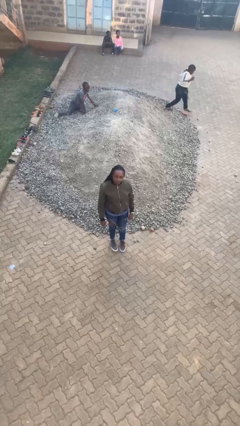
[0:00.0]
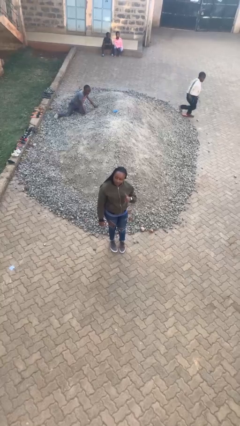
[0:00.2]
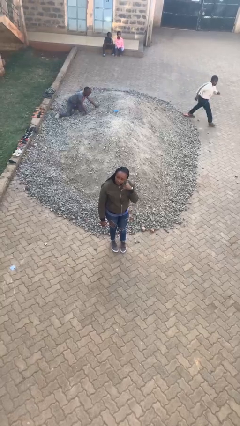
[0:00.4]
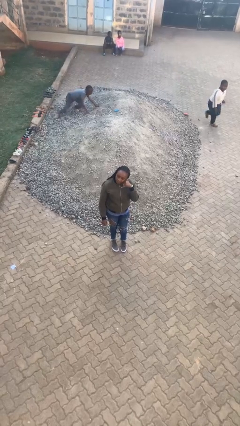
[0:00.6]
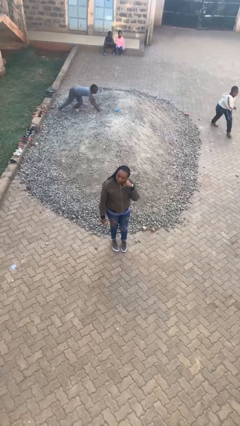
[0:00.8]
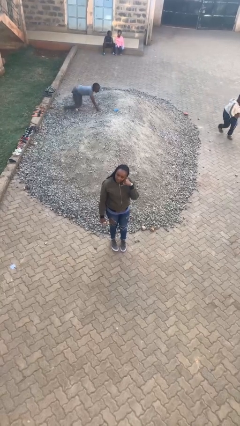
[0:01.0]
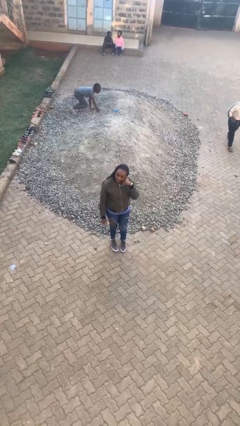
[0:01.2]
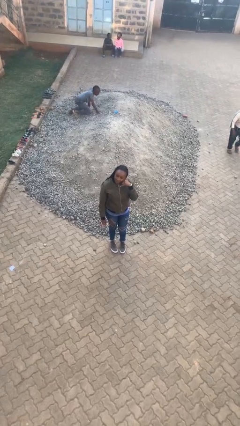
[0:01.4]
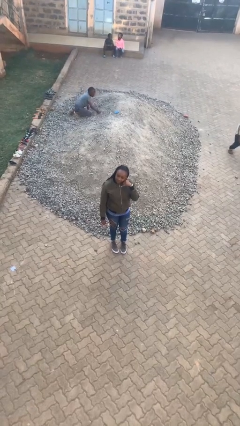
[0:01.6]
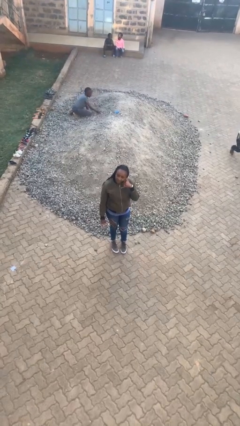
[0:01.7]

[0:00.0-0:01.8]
person gestures call me

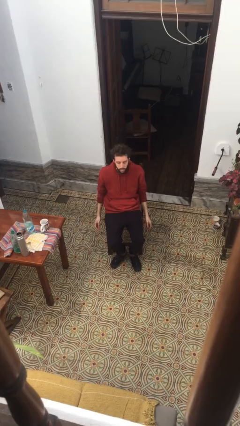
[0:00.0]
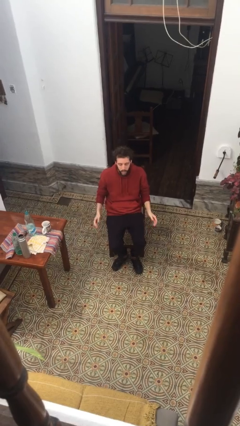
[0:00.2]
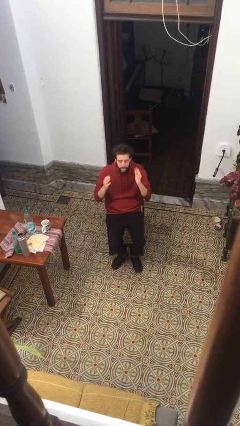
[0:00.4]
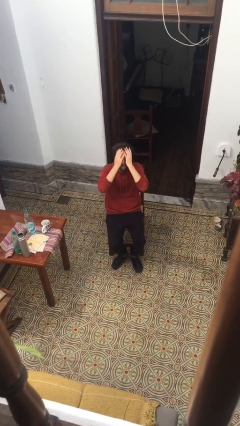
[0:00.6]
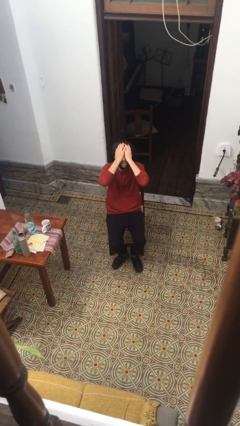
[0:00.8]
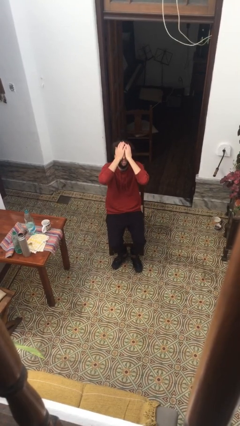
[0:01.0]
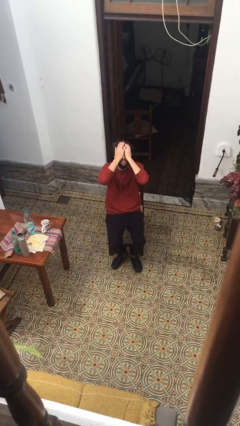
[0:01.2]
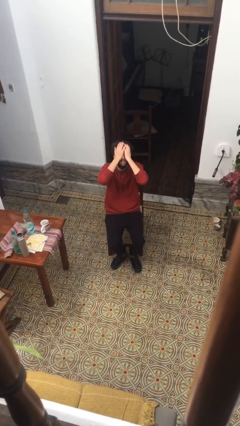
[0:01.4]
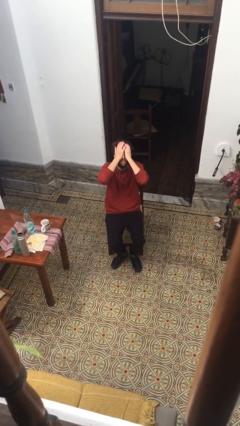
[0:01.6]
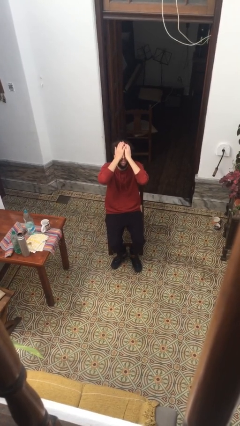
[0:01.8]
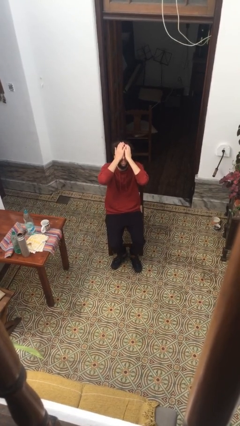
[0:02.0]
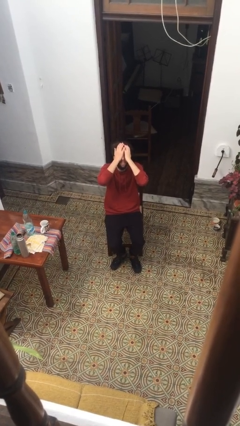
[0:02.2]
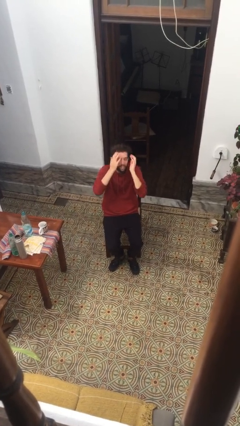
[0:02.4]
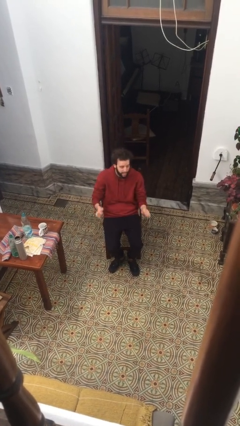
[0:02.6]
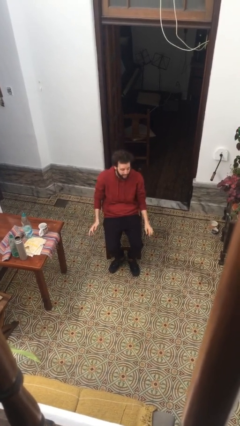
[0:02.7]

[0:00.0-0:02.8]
person covers face with hands

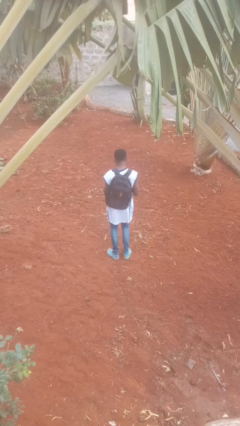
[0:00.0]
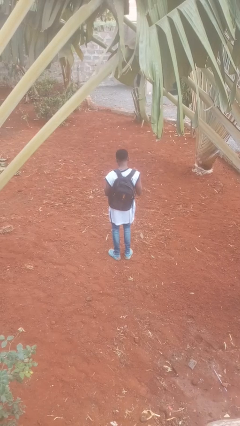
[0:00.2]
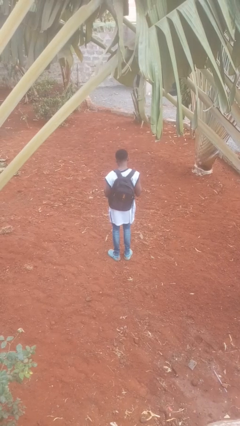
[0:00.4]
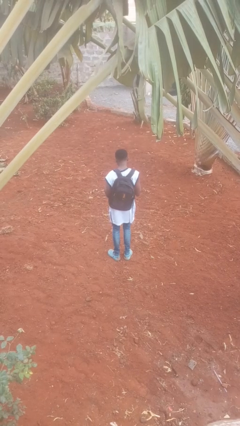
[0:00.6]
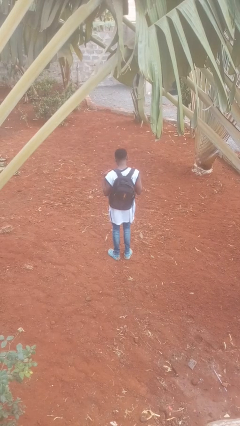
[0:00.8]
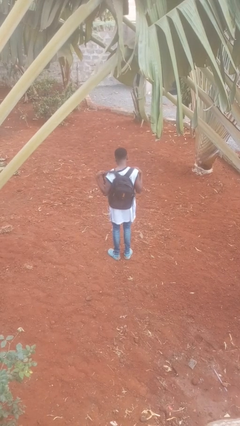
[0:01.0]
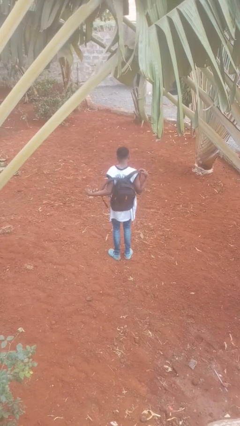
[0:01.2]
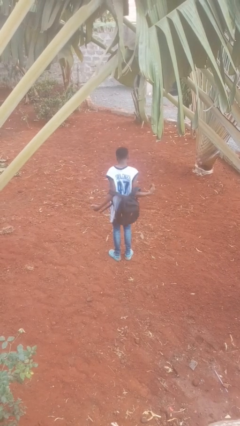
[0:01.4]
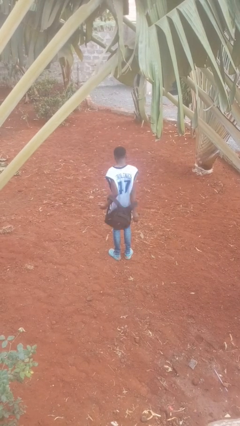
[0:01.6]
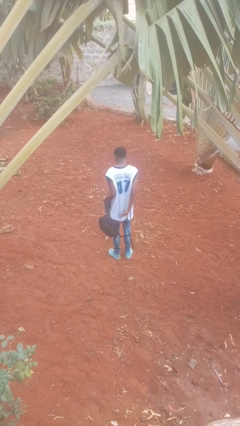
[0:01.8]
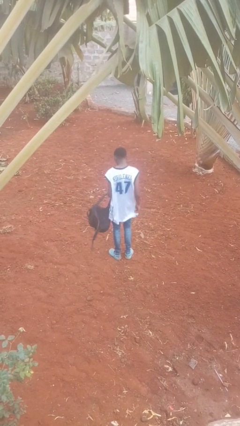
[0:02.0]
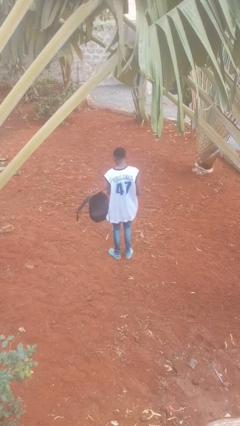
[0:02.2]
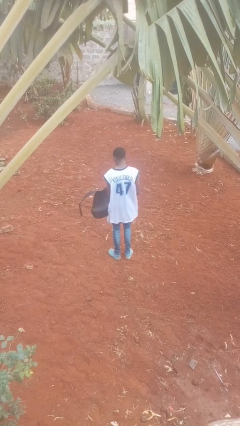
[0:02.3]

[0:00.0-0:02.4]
person takes off backpack

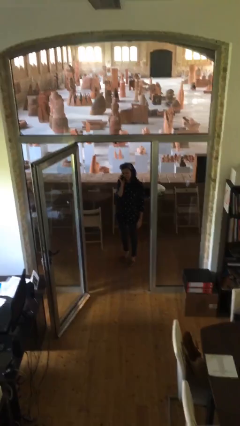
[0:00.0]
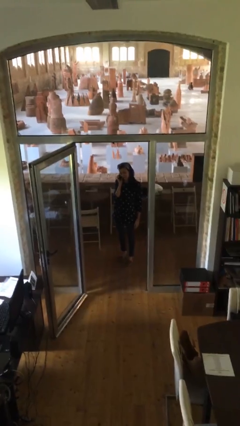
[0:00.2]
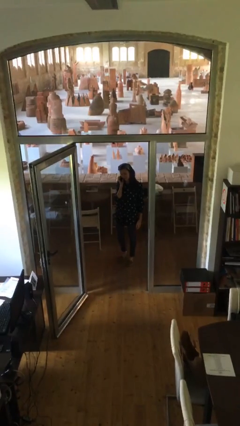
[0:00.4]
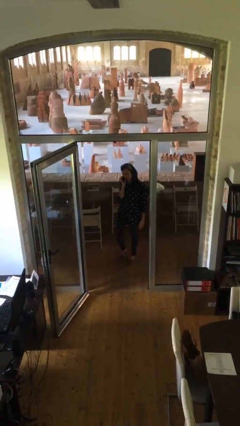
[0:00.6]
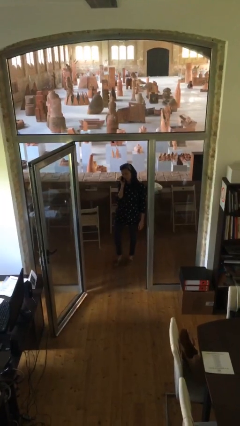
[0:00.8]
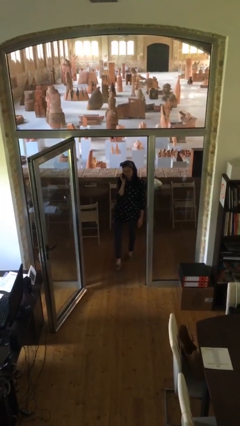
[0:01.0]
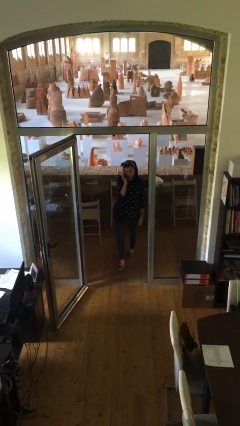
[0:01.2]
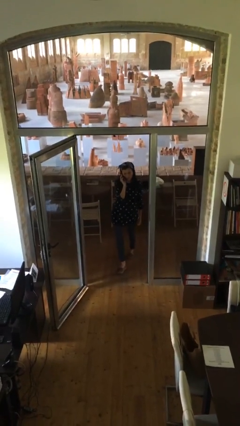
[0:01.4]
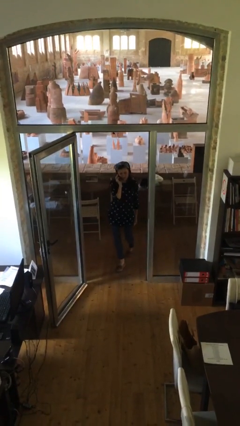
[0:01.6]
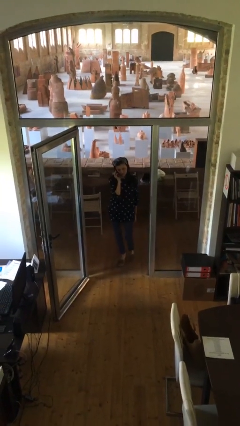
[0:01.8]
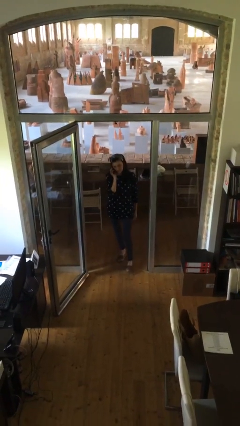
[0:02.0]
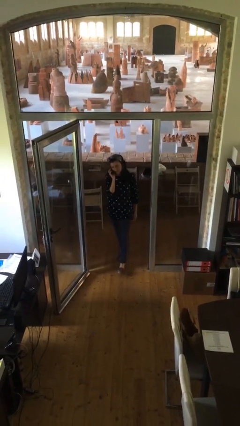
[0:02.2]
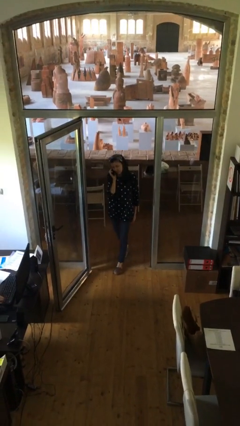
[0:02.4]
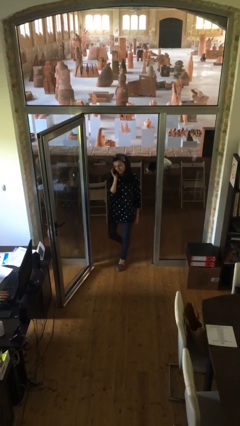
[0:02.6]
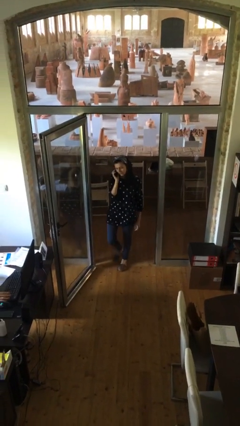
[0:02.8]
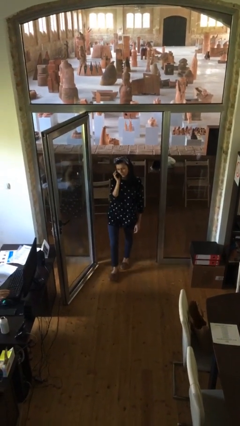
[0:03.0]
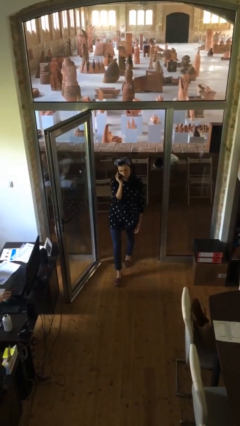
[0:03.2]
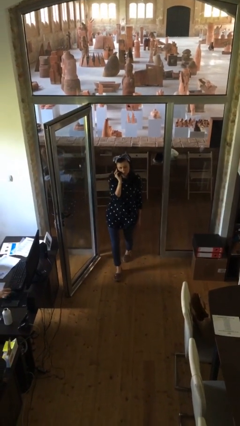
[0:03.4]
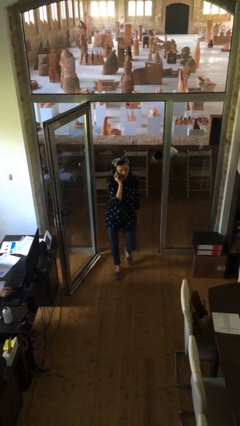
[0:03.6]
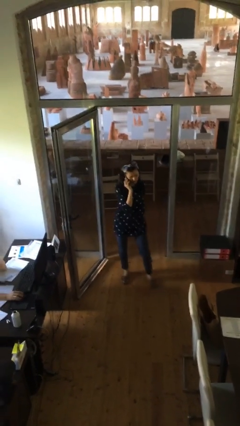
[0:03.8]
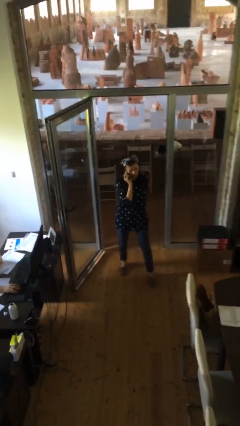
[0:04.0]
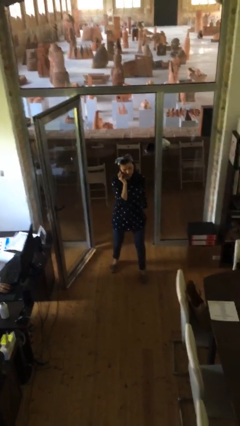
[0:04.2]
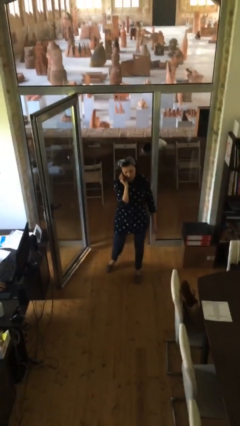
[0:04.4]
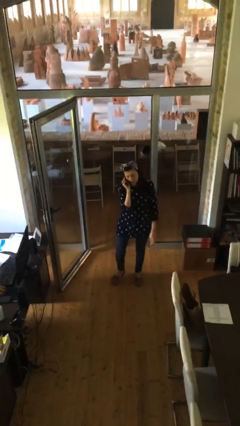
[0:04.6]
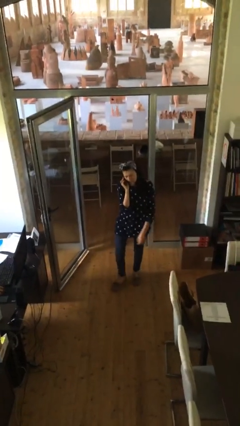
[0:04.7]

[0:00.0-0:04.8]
person enters scene through structure

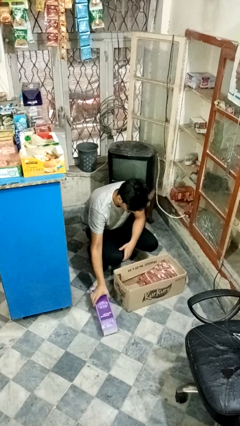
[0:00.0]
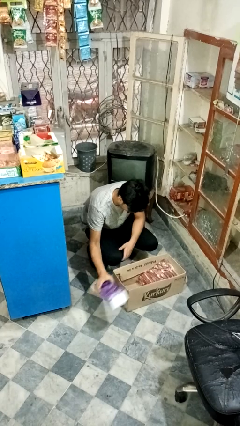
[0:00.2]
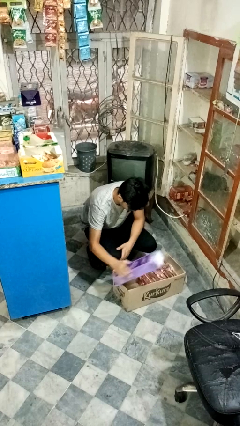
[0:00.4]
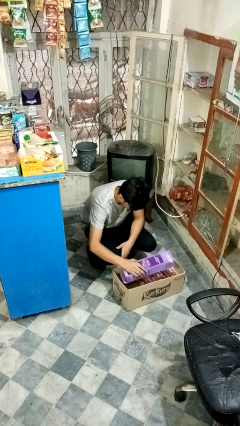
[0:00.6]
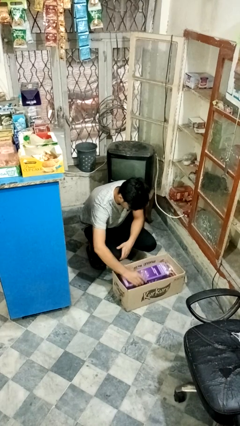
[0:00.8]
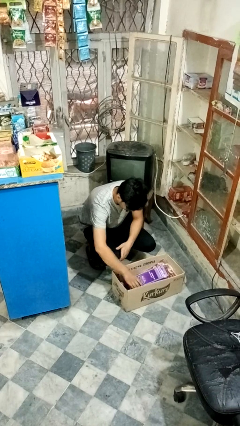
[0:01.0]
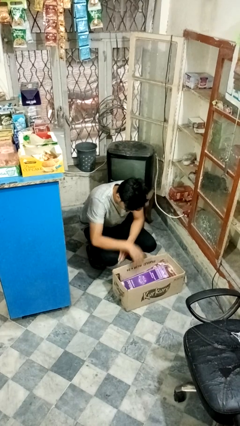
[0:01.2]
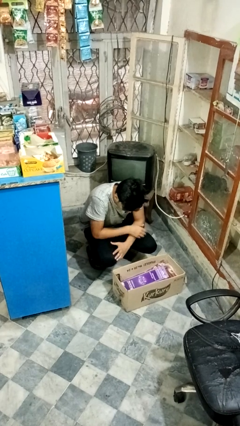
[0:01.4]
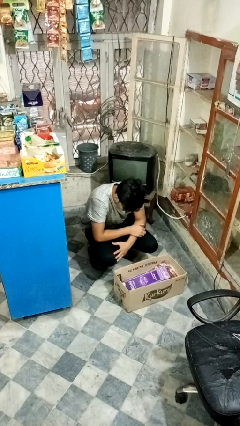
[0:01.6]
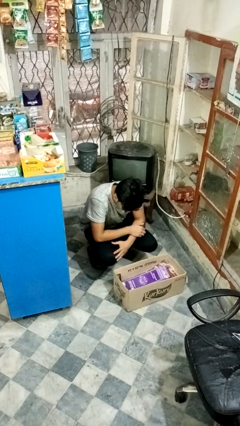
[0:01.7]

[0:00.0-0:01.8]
person puts object into box

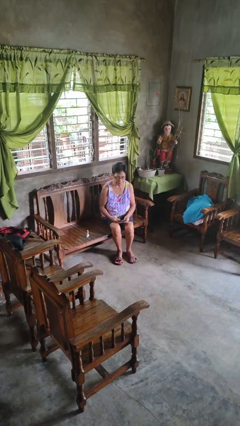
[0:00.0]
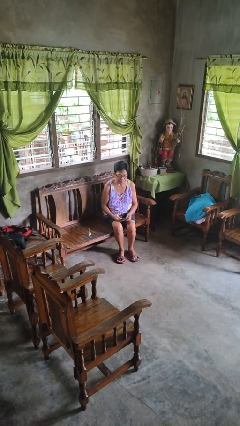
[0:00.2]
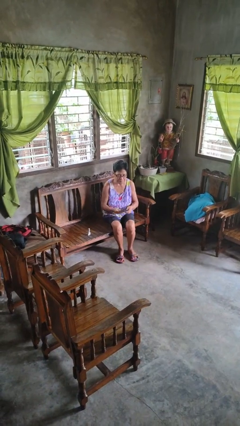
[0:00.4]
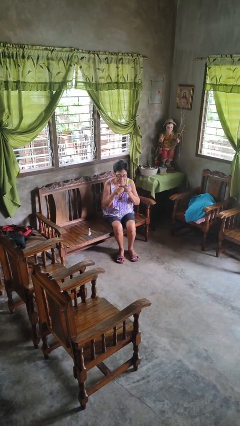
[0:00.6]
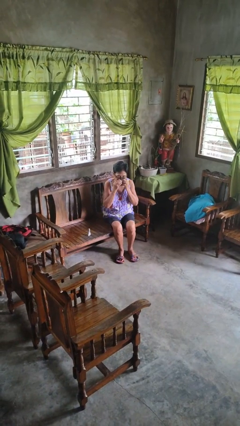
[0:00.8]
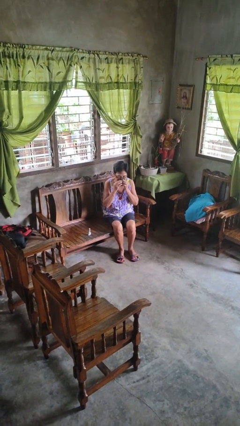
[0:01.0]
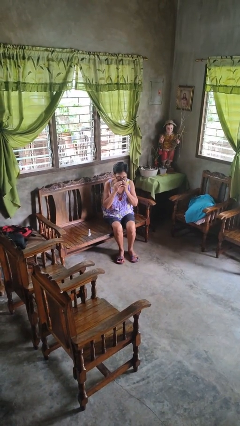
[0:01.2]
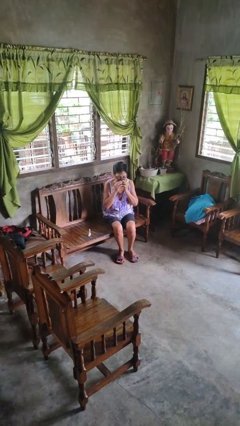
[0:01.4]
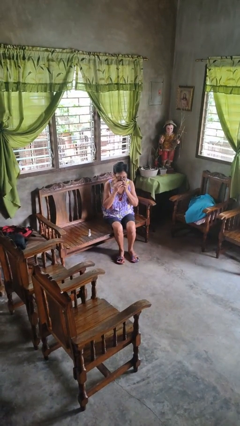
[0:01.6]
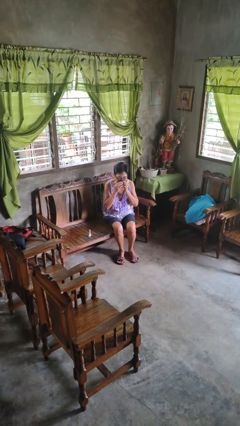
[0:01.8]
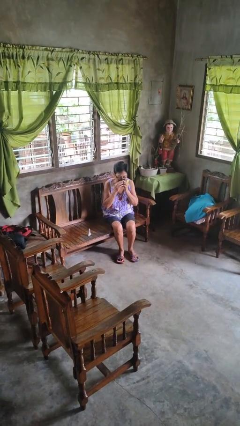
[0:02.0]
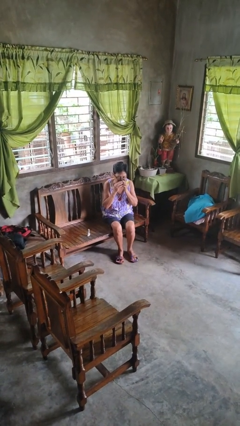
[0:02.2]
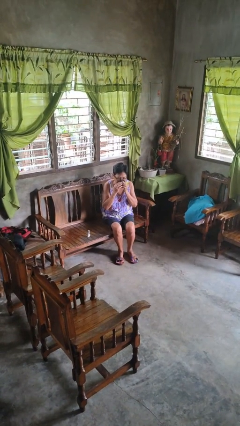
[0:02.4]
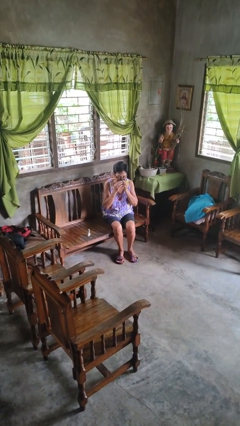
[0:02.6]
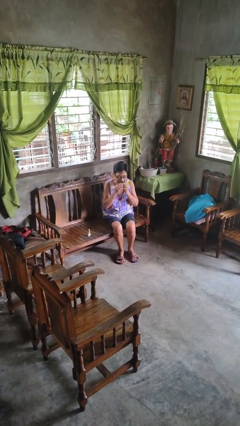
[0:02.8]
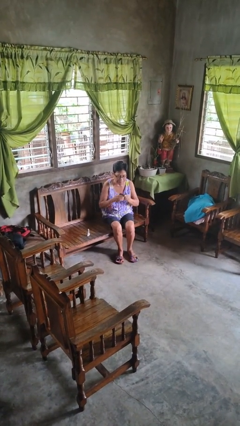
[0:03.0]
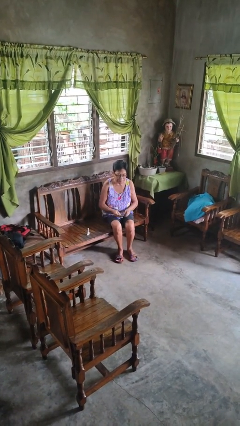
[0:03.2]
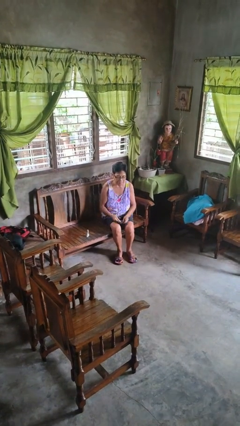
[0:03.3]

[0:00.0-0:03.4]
person blows nose

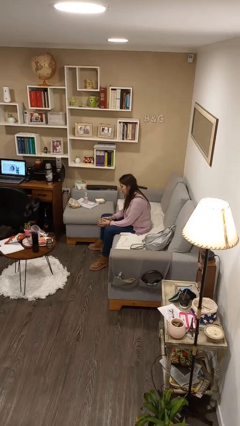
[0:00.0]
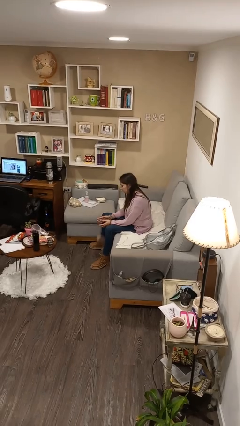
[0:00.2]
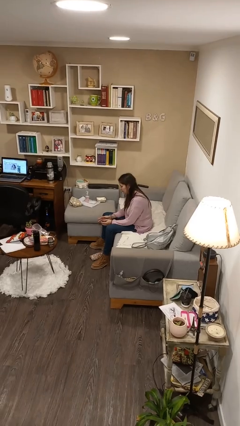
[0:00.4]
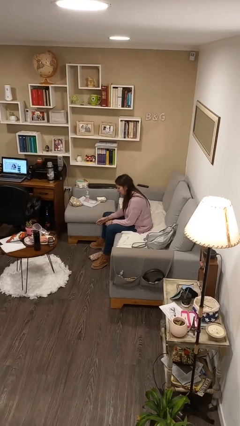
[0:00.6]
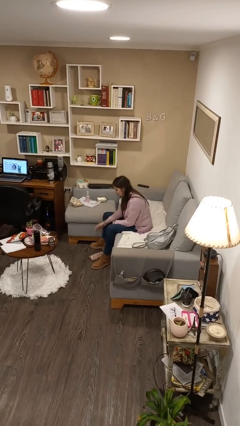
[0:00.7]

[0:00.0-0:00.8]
person drops object
